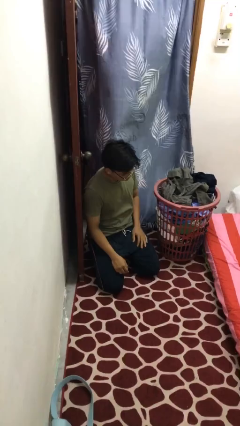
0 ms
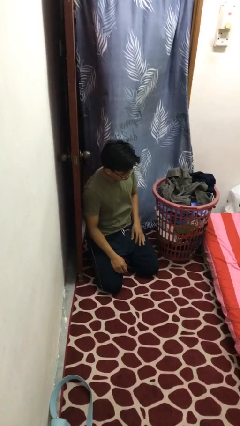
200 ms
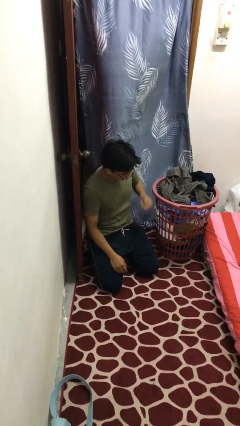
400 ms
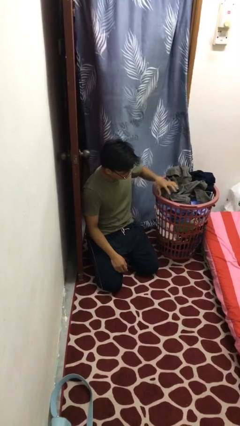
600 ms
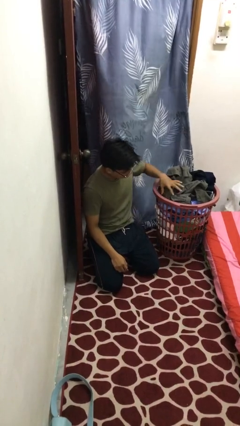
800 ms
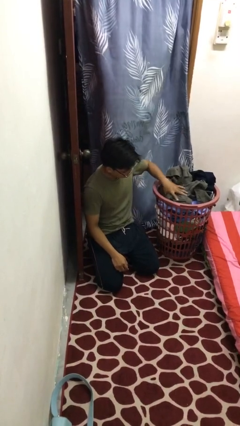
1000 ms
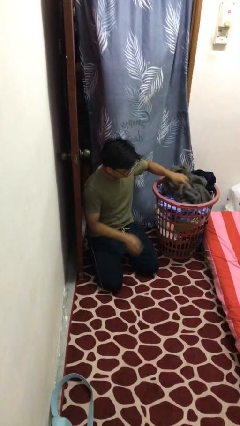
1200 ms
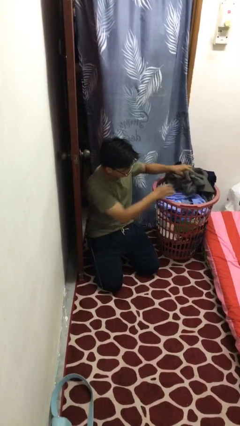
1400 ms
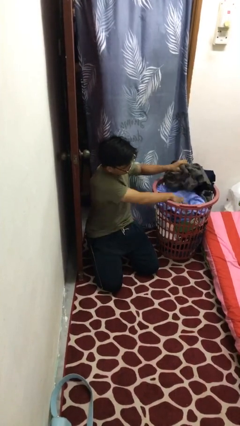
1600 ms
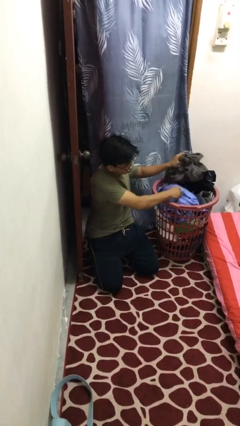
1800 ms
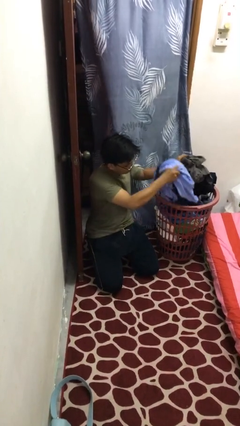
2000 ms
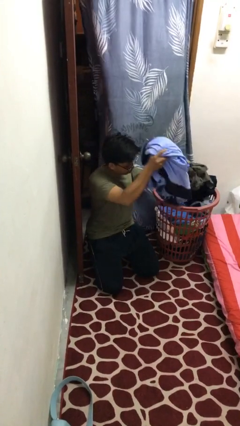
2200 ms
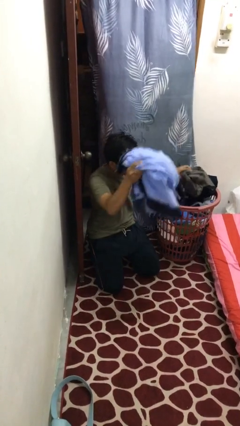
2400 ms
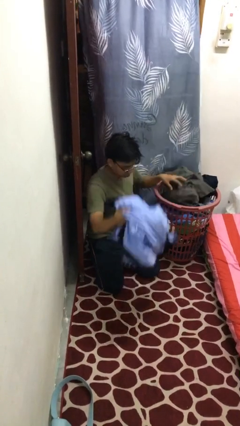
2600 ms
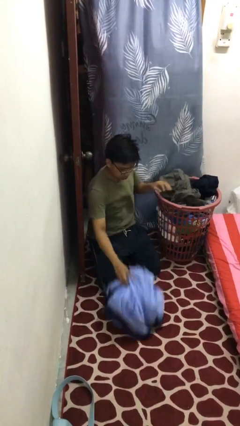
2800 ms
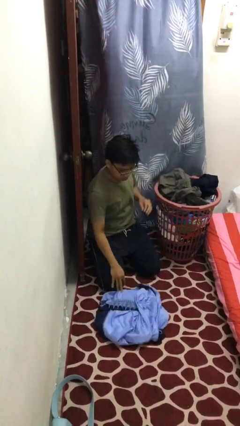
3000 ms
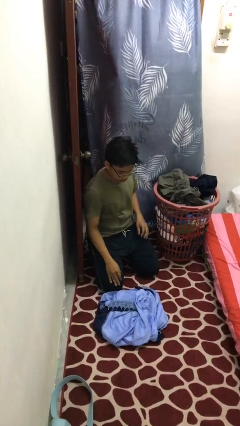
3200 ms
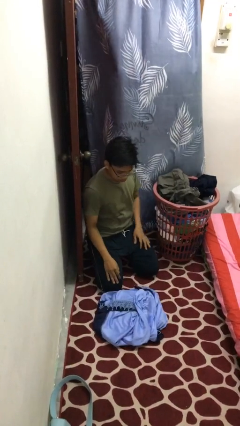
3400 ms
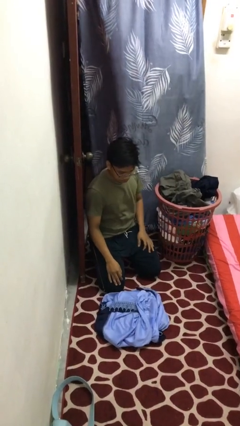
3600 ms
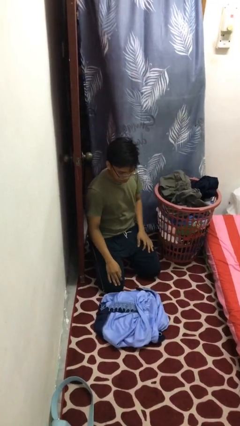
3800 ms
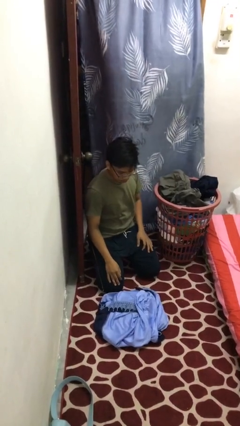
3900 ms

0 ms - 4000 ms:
person takes object from basket

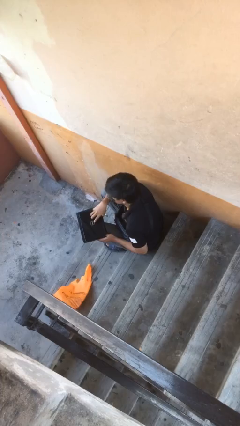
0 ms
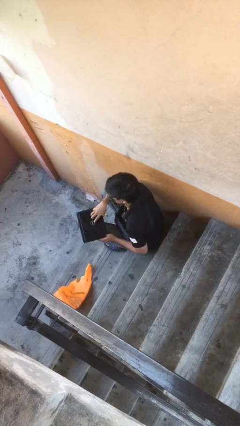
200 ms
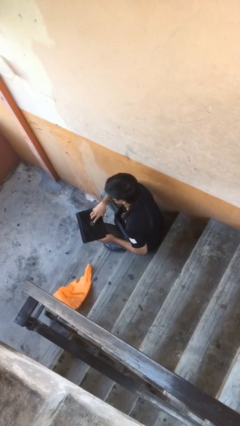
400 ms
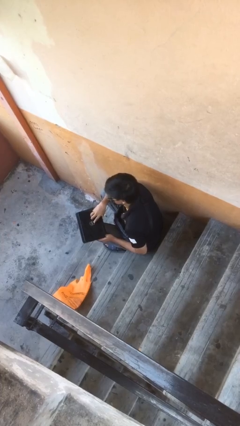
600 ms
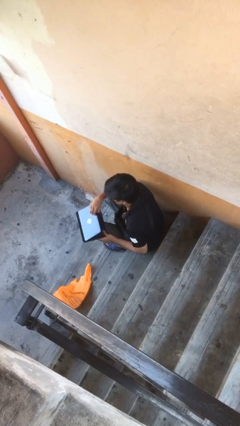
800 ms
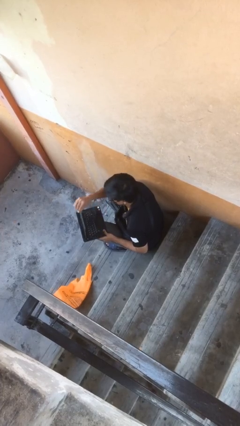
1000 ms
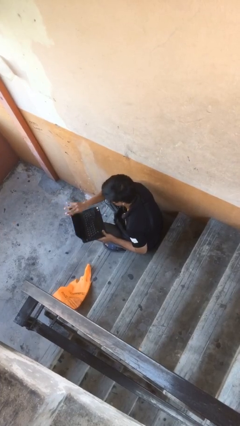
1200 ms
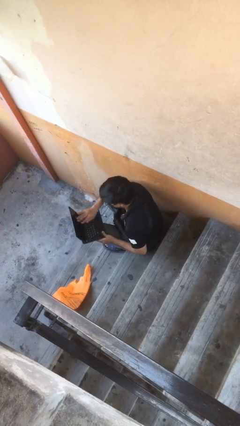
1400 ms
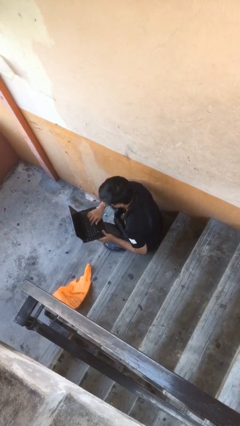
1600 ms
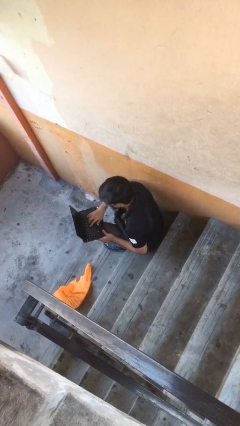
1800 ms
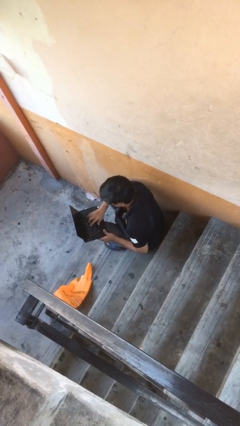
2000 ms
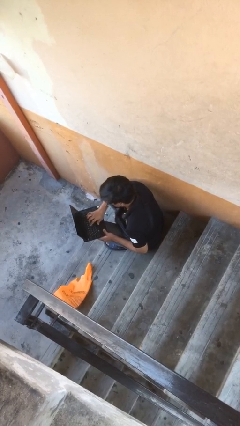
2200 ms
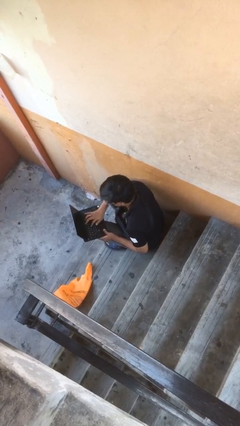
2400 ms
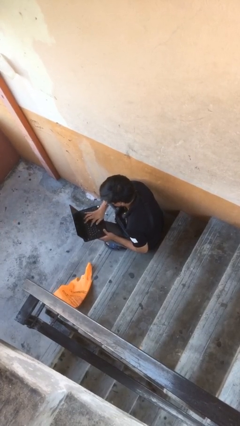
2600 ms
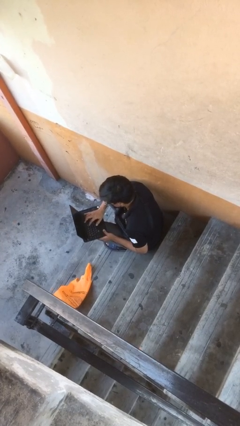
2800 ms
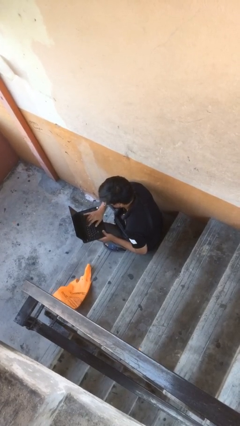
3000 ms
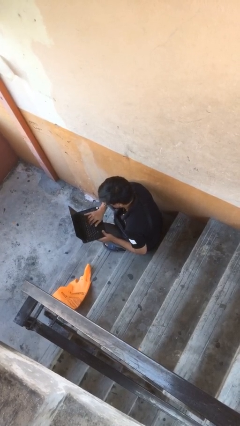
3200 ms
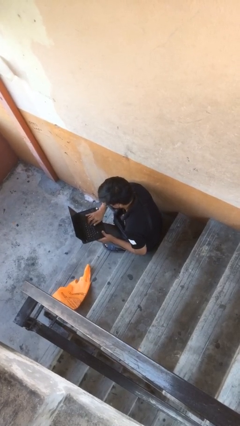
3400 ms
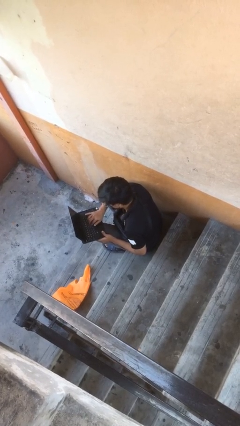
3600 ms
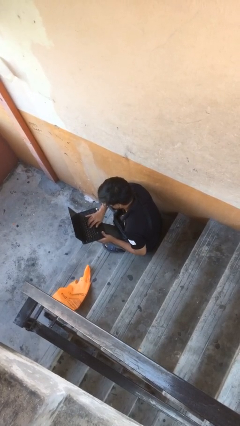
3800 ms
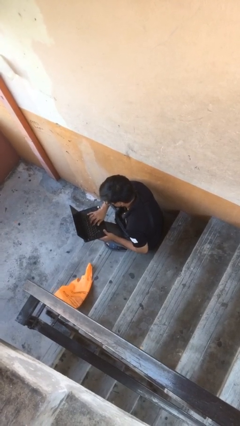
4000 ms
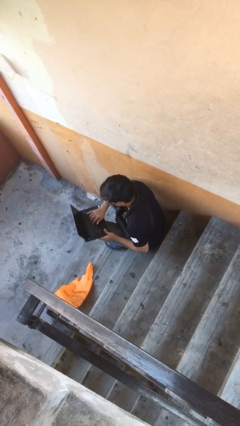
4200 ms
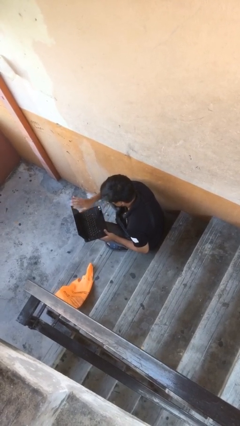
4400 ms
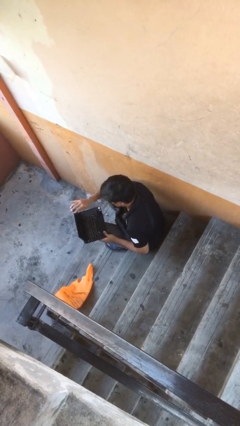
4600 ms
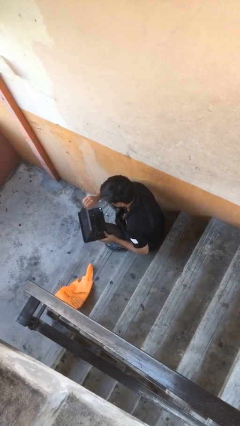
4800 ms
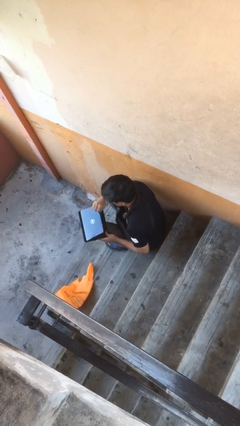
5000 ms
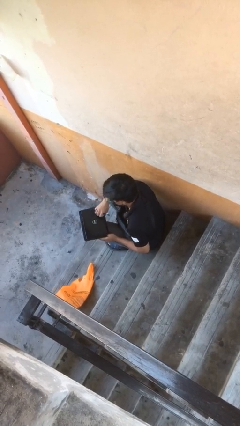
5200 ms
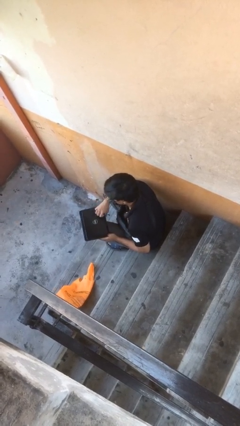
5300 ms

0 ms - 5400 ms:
person interacts with laptop

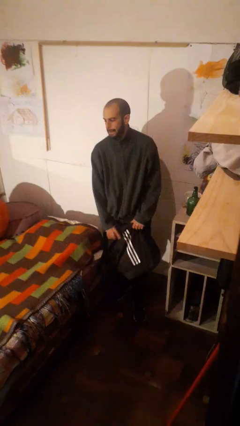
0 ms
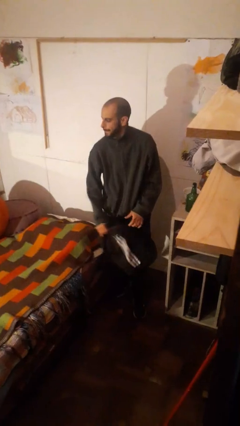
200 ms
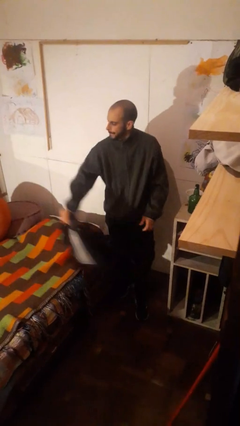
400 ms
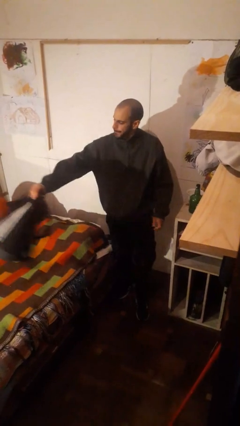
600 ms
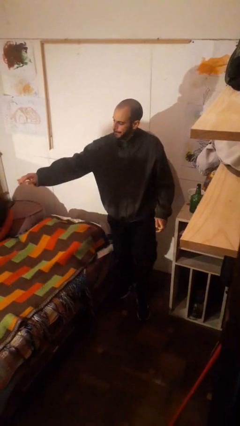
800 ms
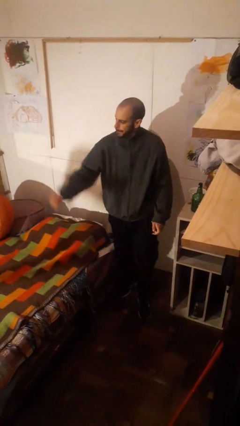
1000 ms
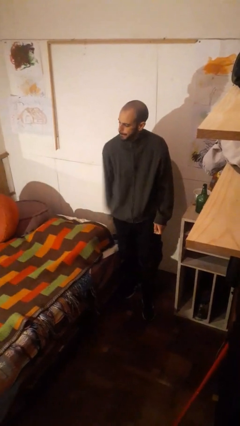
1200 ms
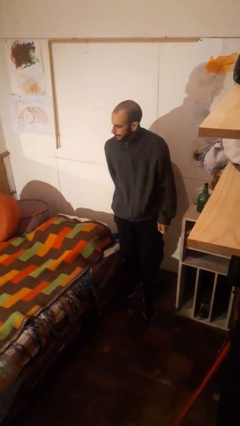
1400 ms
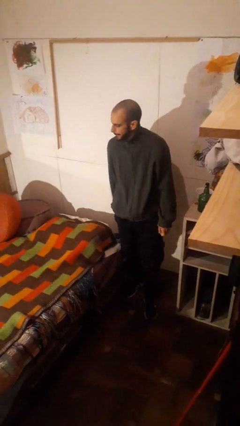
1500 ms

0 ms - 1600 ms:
person throws object on bed

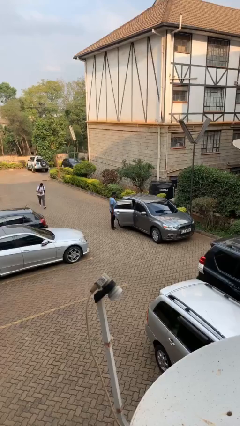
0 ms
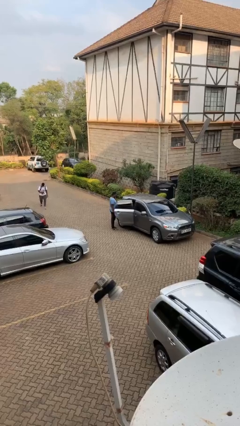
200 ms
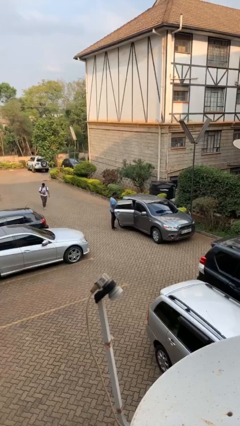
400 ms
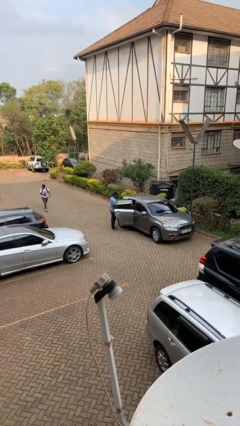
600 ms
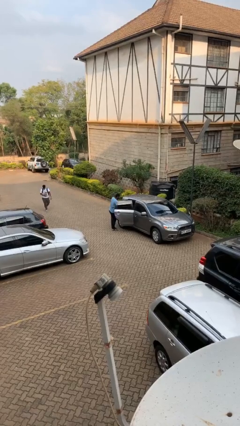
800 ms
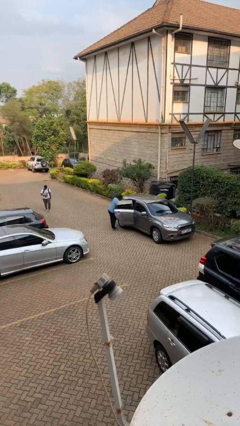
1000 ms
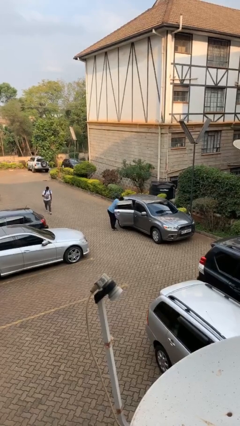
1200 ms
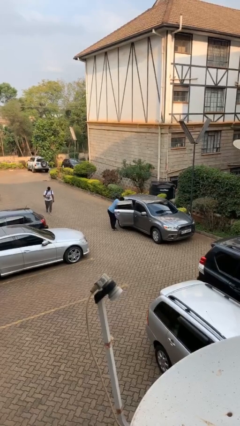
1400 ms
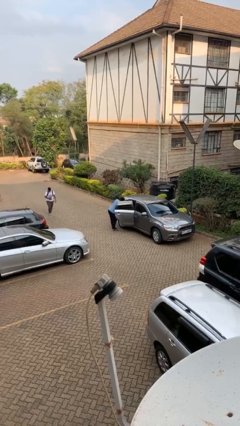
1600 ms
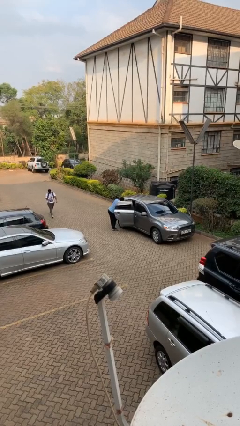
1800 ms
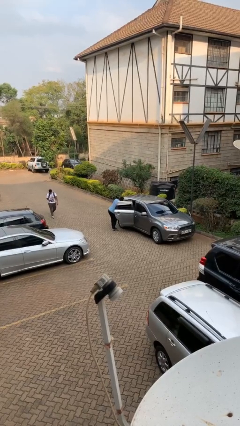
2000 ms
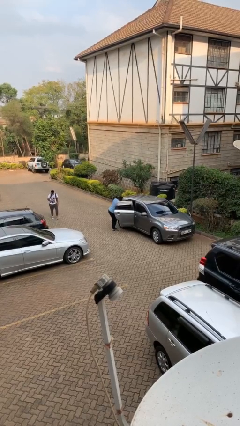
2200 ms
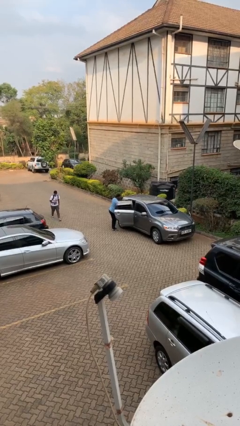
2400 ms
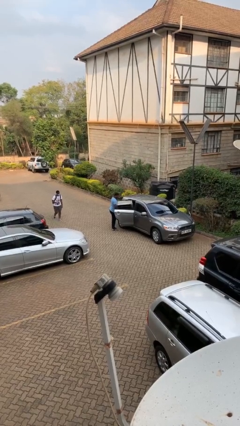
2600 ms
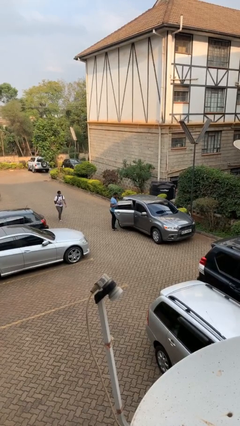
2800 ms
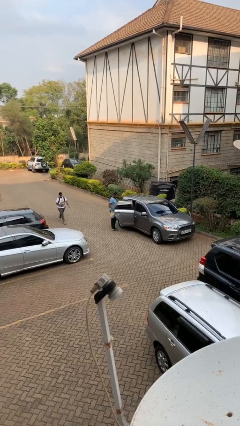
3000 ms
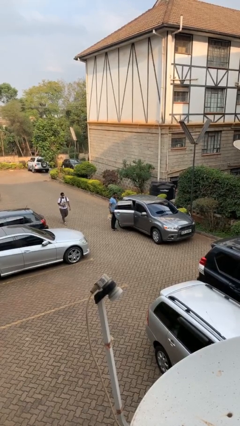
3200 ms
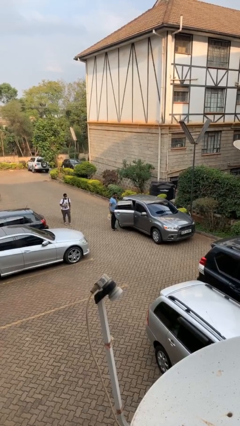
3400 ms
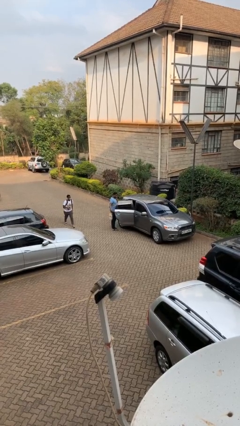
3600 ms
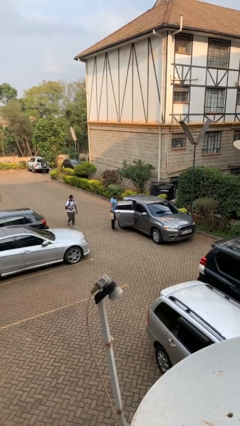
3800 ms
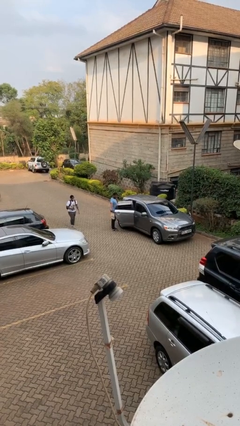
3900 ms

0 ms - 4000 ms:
person unloads car

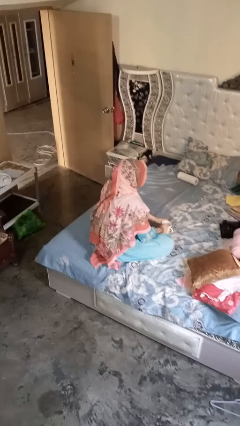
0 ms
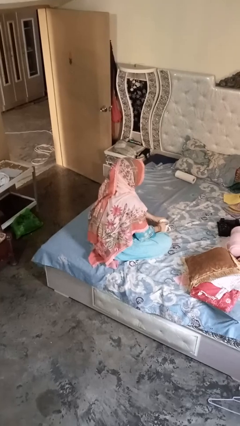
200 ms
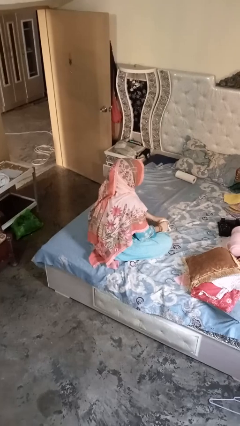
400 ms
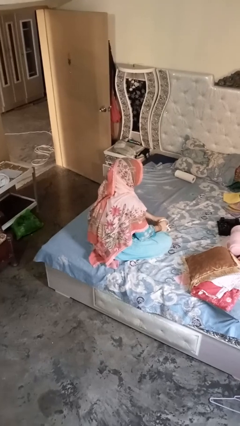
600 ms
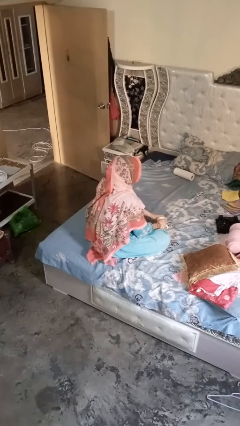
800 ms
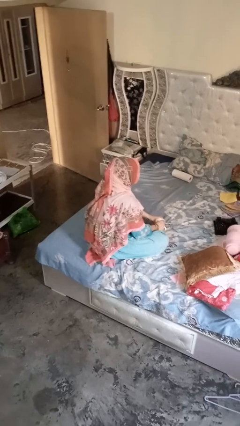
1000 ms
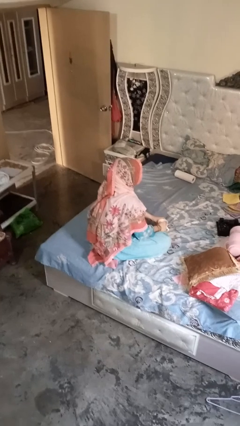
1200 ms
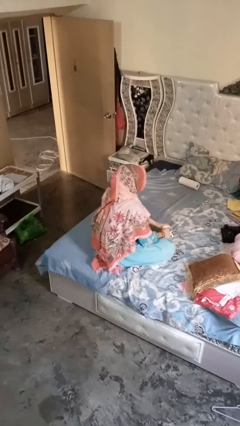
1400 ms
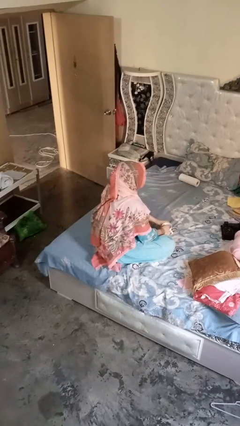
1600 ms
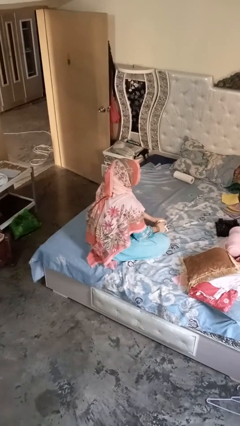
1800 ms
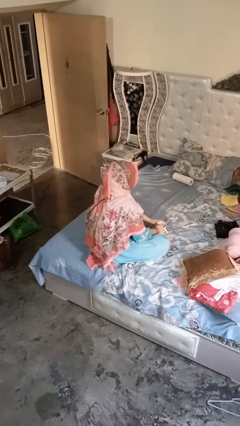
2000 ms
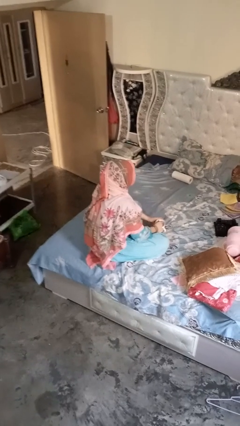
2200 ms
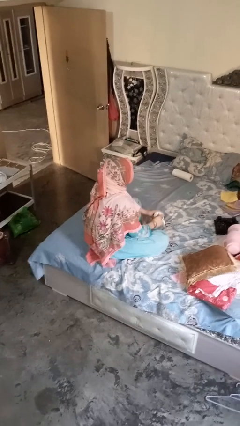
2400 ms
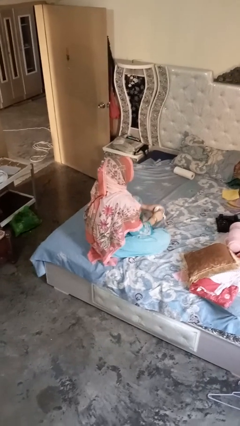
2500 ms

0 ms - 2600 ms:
person stirs mug

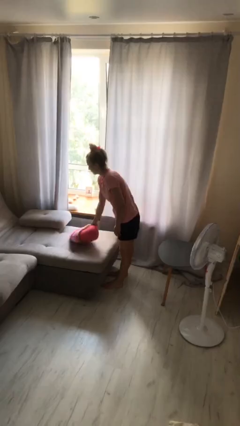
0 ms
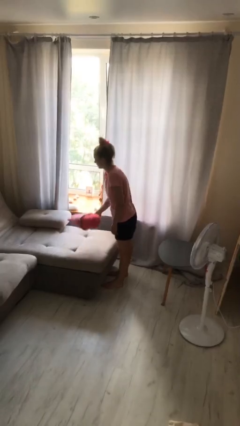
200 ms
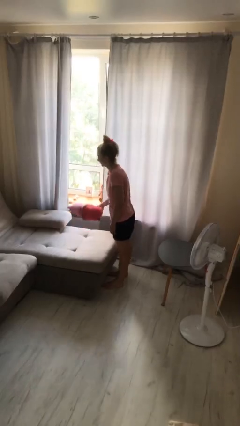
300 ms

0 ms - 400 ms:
person picks up object from couch
